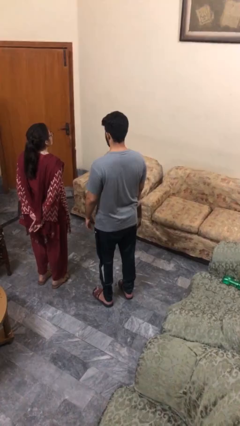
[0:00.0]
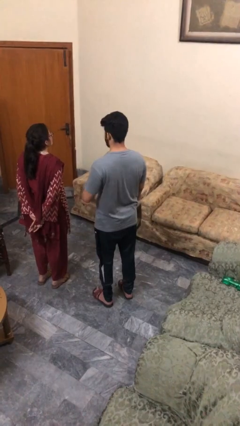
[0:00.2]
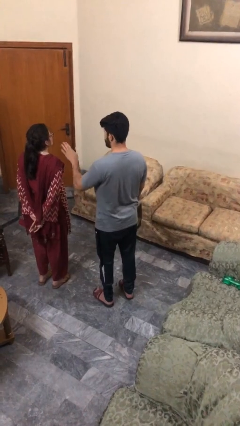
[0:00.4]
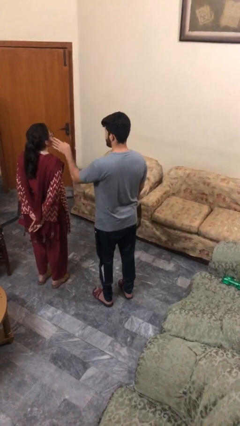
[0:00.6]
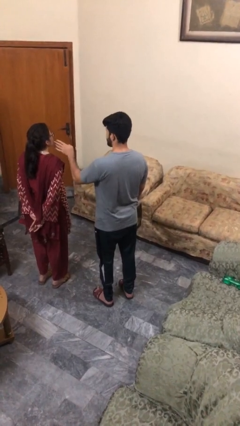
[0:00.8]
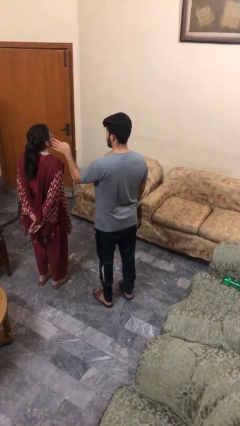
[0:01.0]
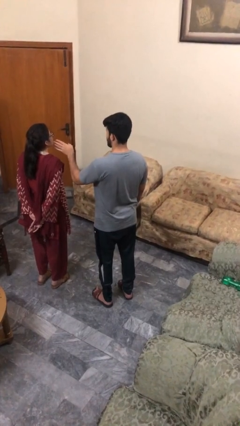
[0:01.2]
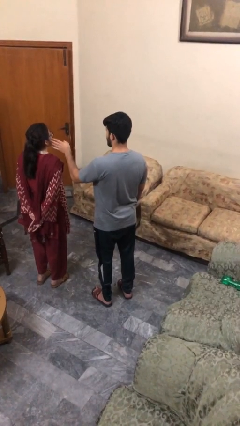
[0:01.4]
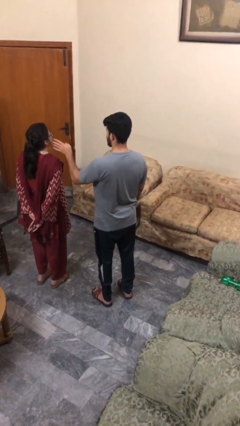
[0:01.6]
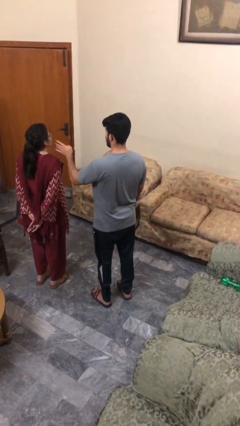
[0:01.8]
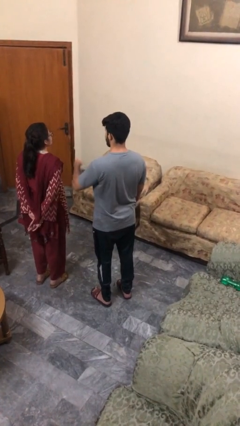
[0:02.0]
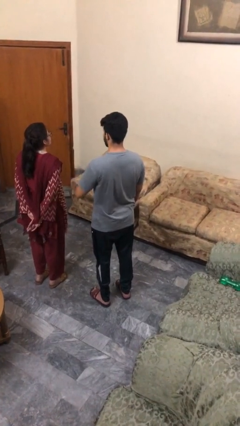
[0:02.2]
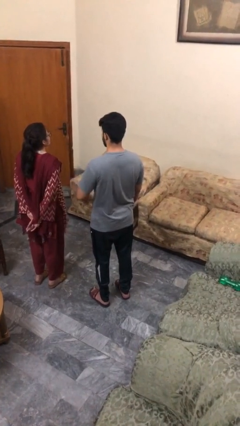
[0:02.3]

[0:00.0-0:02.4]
person touches face of person

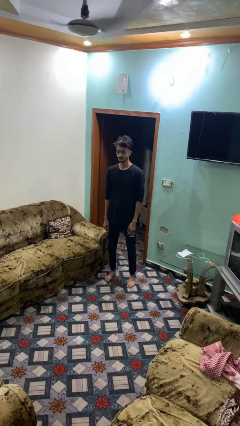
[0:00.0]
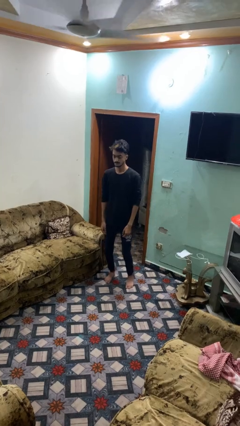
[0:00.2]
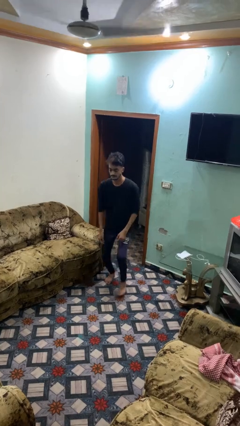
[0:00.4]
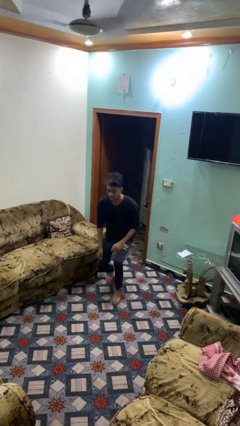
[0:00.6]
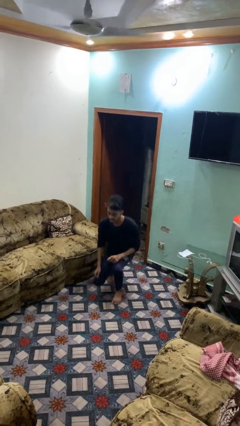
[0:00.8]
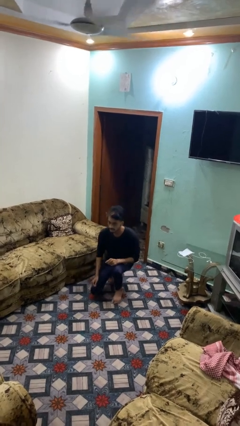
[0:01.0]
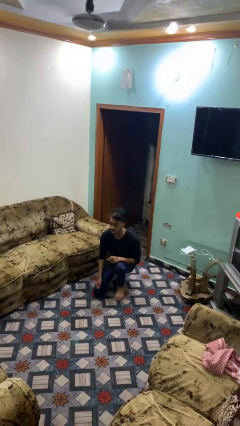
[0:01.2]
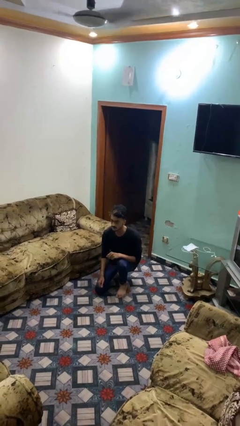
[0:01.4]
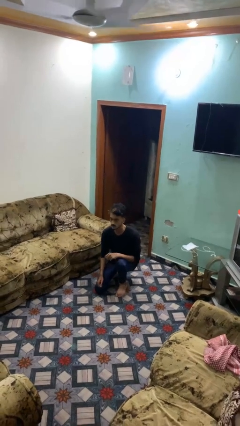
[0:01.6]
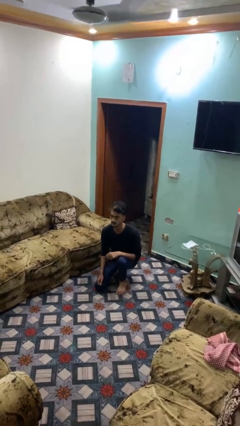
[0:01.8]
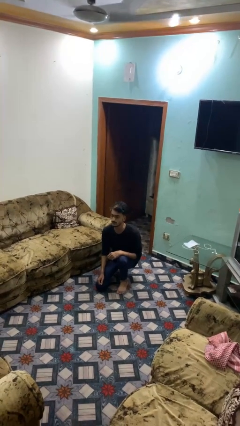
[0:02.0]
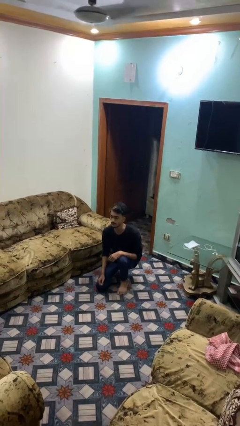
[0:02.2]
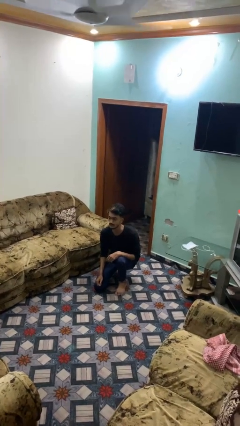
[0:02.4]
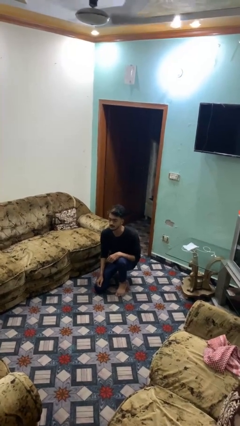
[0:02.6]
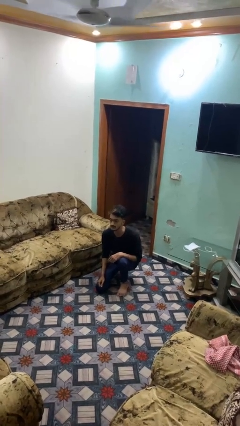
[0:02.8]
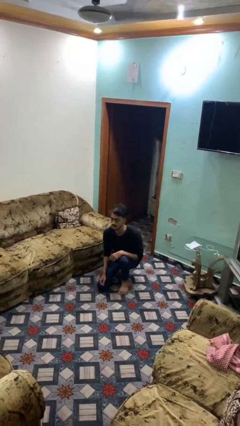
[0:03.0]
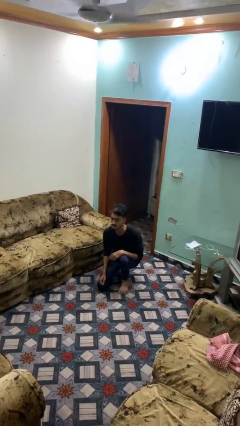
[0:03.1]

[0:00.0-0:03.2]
person kneels

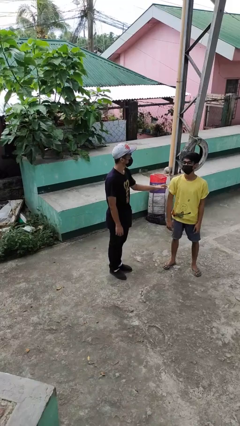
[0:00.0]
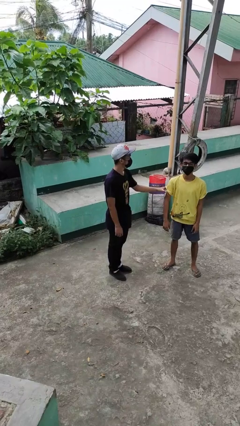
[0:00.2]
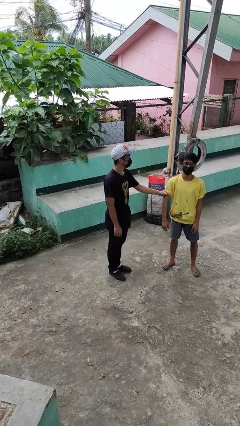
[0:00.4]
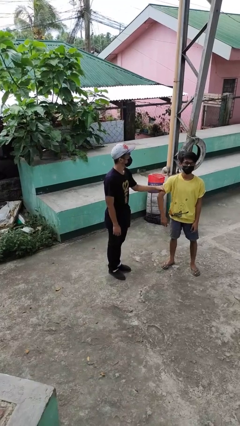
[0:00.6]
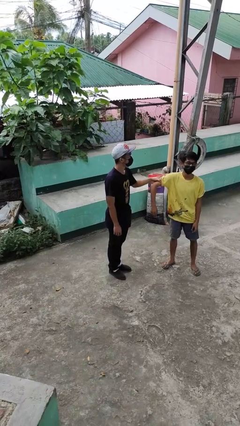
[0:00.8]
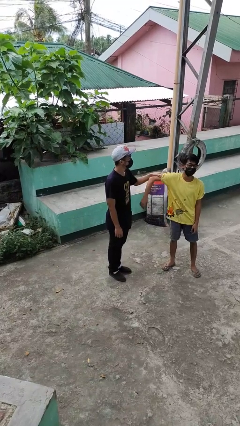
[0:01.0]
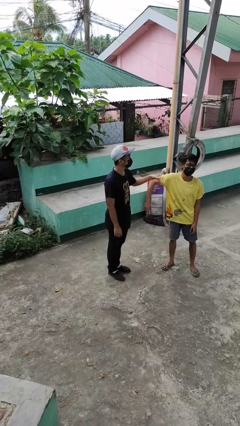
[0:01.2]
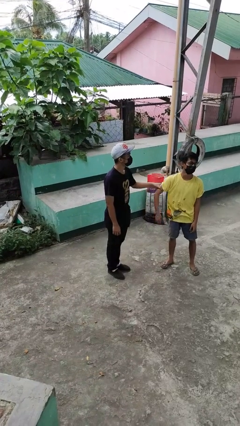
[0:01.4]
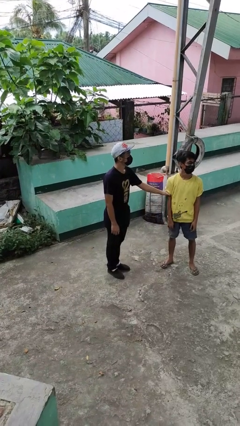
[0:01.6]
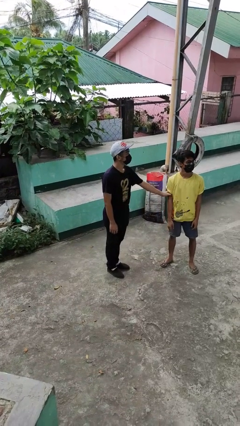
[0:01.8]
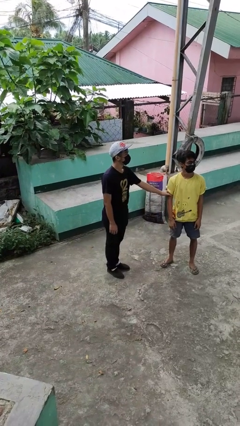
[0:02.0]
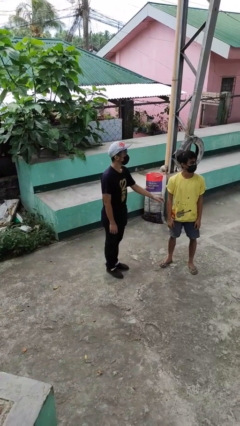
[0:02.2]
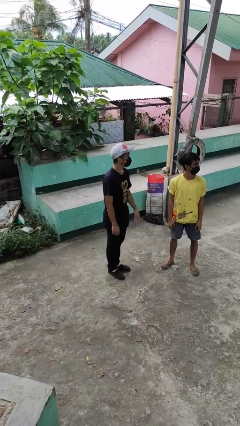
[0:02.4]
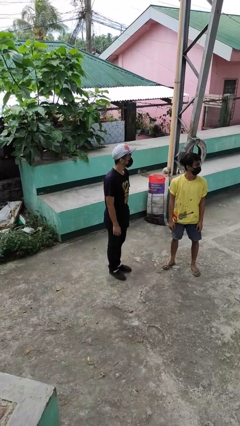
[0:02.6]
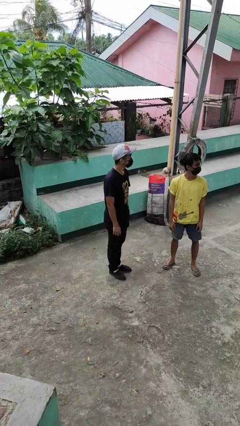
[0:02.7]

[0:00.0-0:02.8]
person grabs person by bicep

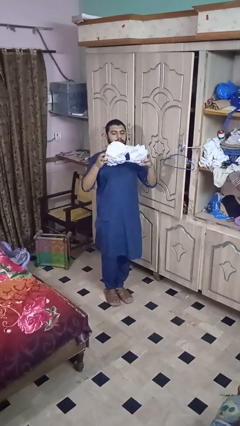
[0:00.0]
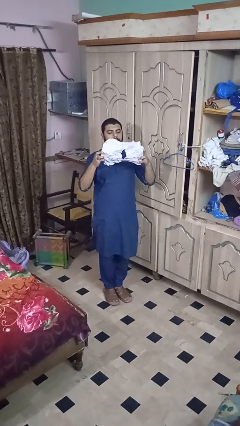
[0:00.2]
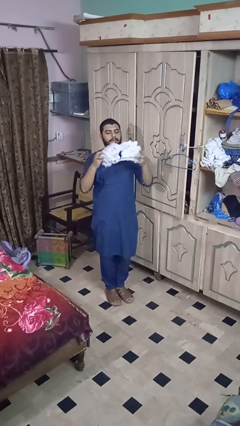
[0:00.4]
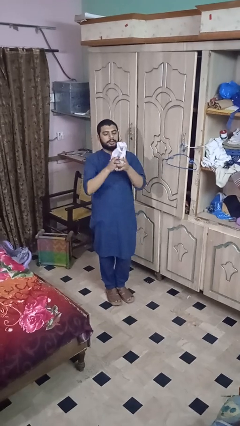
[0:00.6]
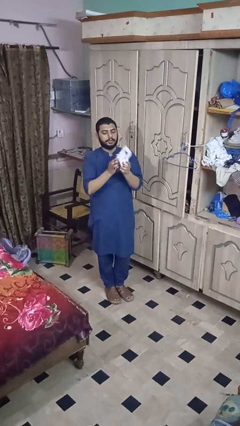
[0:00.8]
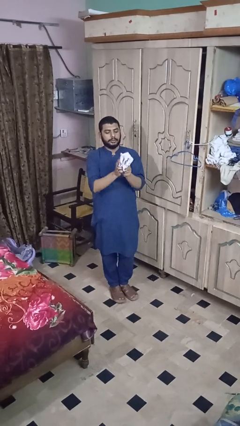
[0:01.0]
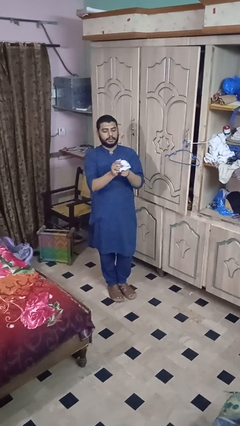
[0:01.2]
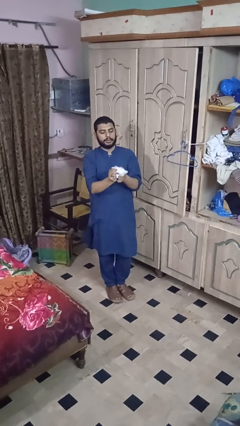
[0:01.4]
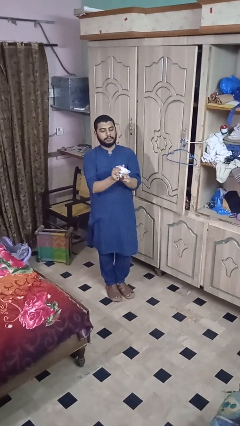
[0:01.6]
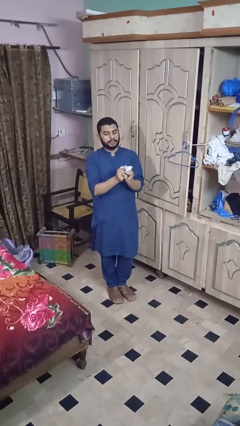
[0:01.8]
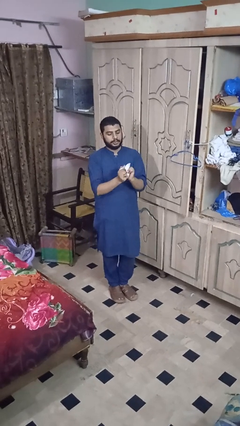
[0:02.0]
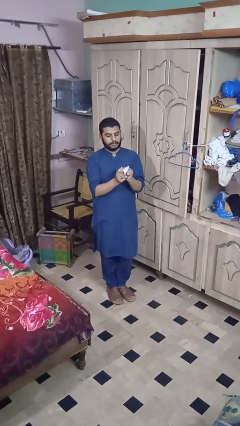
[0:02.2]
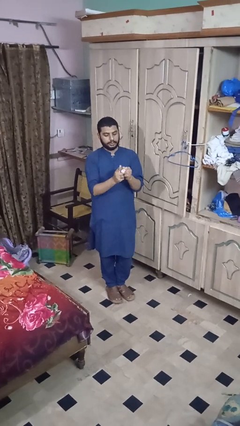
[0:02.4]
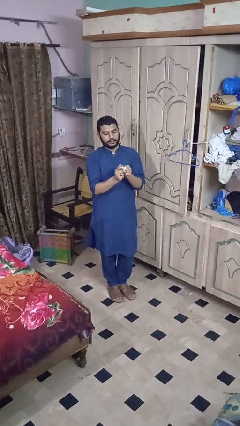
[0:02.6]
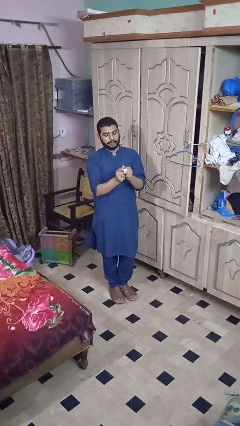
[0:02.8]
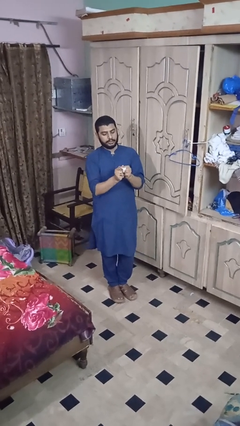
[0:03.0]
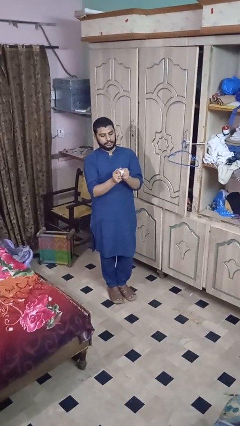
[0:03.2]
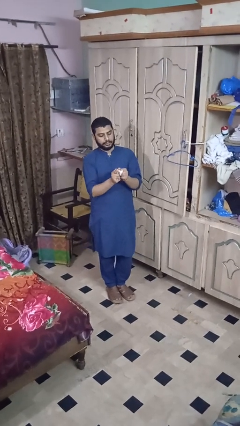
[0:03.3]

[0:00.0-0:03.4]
person crumples paper

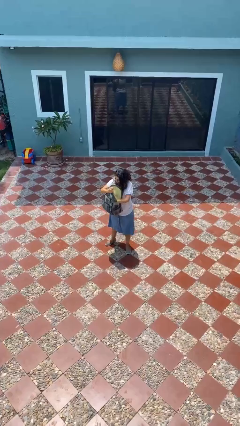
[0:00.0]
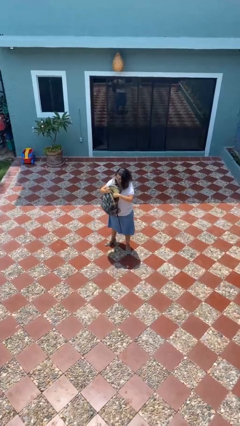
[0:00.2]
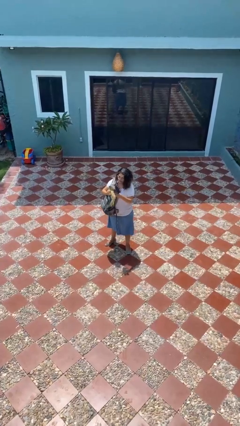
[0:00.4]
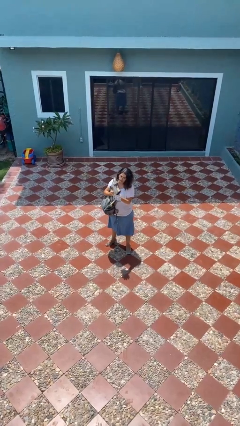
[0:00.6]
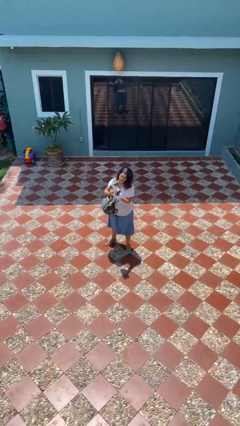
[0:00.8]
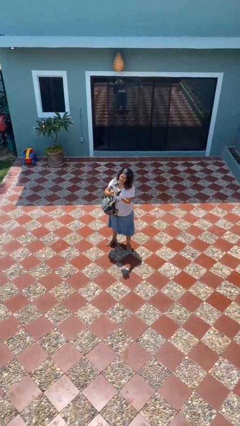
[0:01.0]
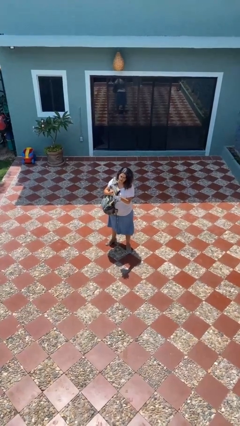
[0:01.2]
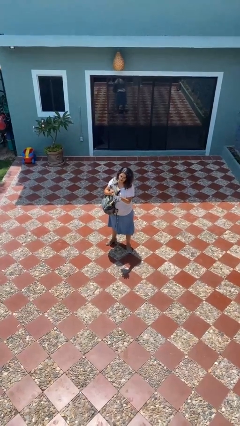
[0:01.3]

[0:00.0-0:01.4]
person takes object from backpack

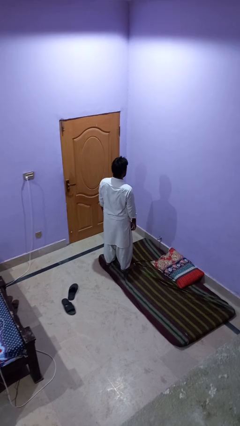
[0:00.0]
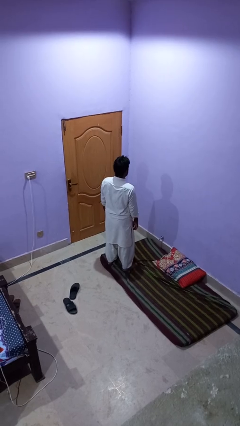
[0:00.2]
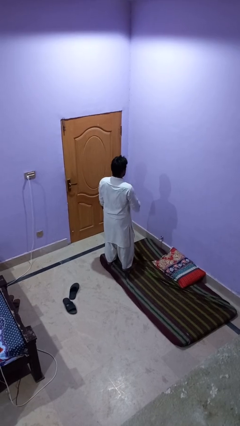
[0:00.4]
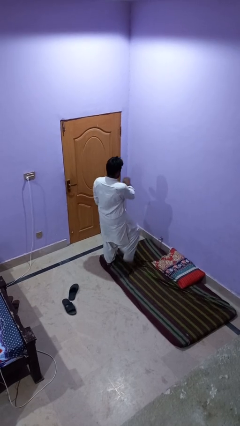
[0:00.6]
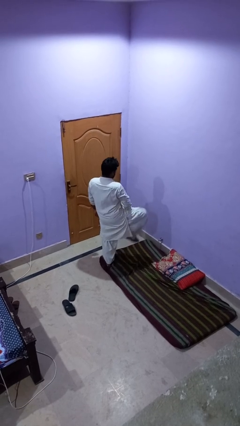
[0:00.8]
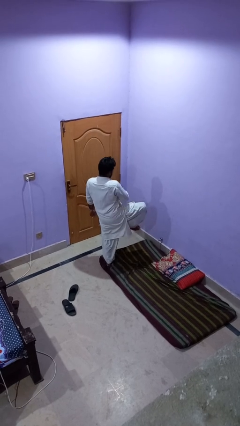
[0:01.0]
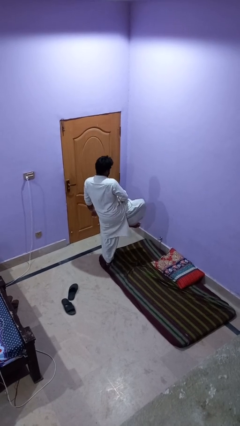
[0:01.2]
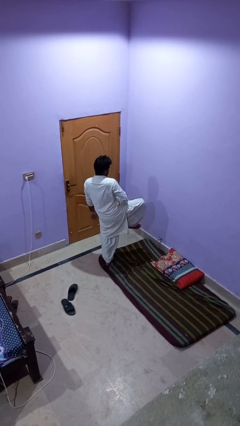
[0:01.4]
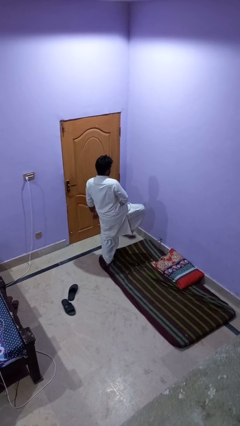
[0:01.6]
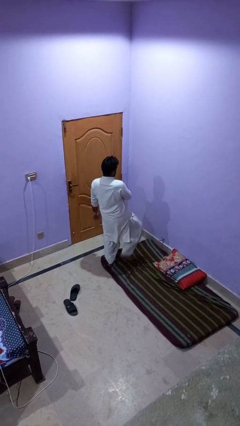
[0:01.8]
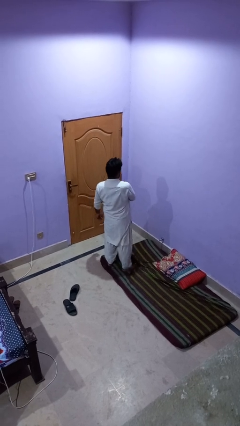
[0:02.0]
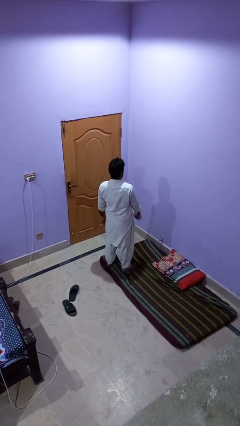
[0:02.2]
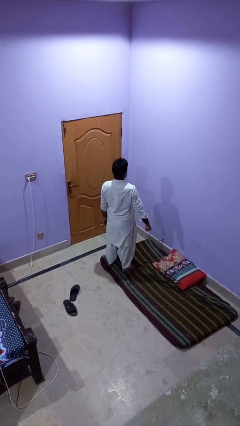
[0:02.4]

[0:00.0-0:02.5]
person slaps hands on thighs

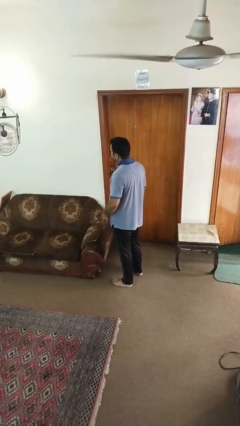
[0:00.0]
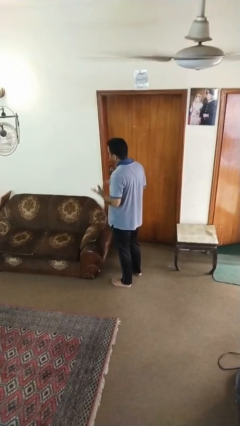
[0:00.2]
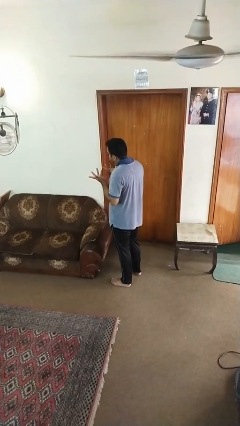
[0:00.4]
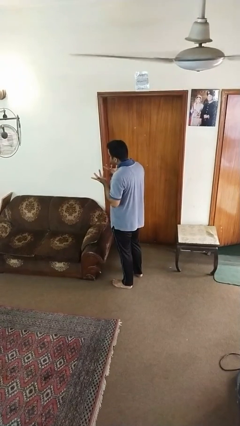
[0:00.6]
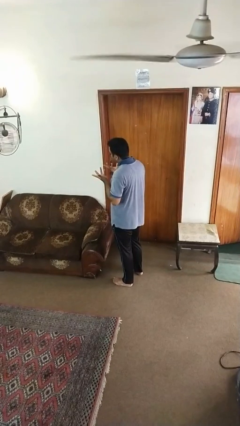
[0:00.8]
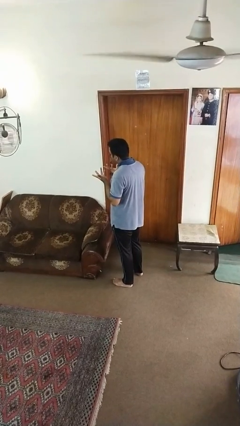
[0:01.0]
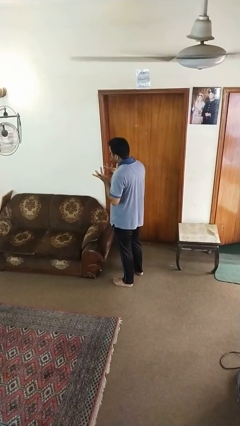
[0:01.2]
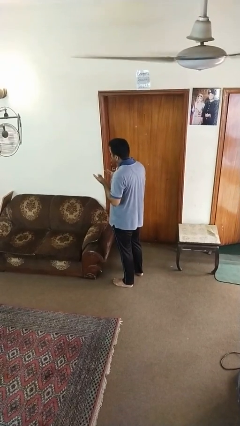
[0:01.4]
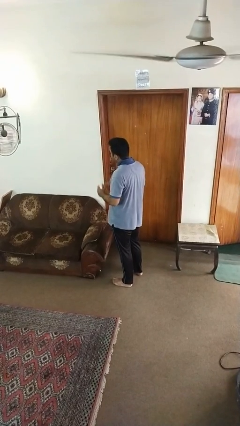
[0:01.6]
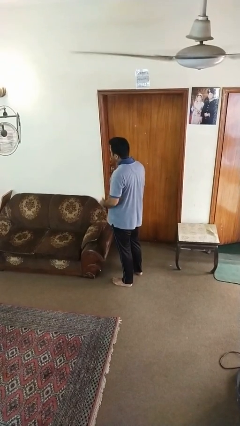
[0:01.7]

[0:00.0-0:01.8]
person shrugs

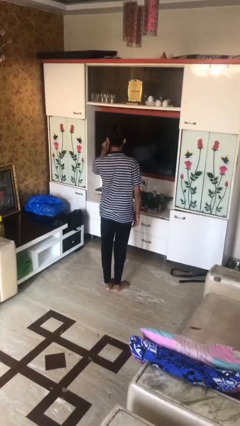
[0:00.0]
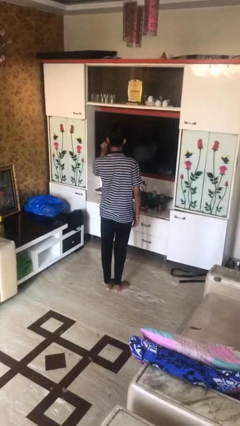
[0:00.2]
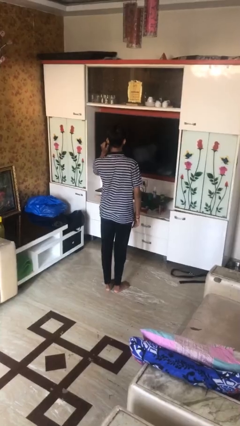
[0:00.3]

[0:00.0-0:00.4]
person touches earlobe
